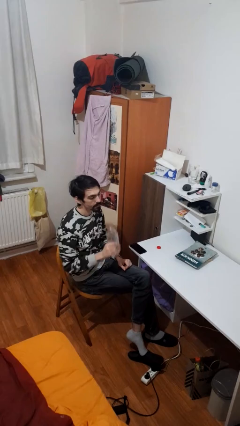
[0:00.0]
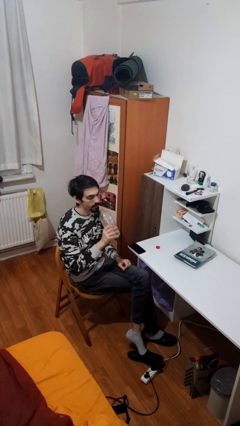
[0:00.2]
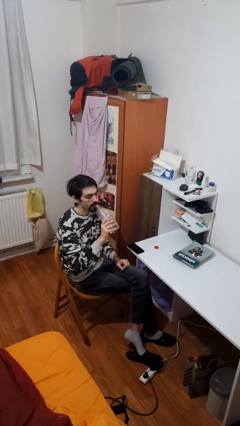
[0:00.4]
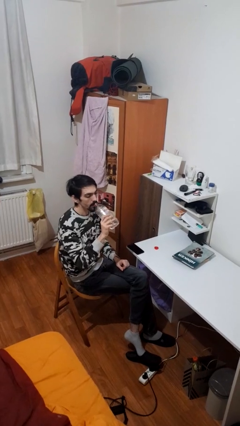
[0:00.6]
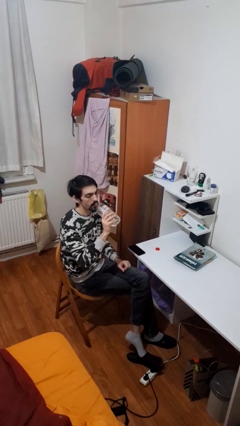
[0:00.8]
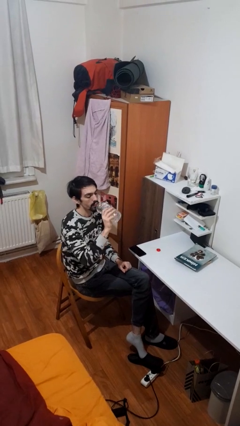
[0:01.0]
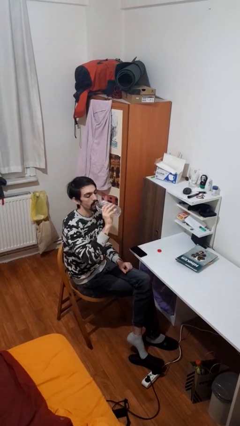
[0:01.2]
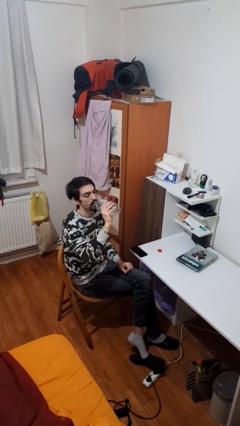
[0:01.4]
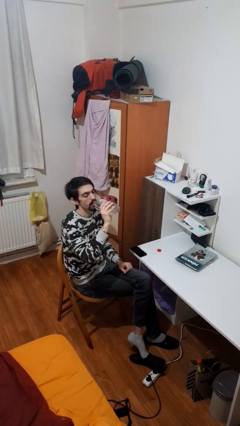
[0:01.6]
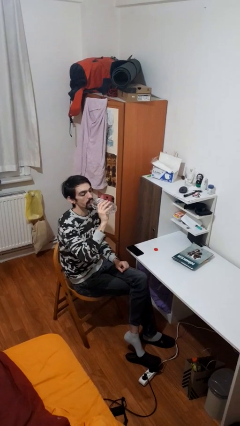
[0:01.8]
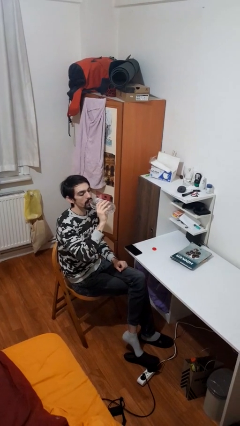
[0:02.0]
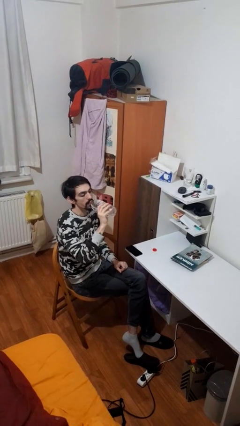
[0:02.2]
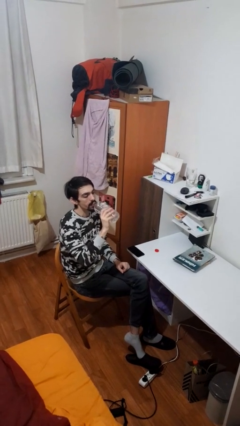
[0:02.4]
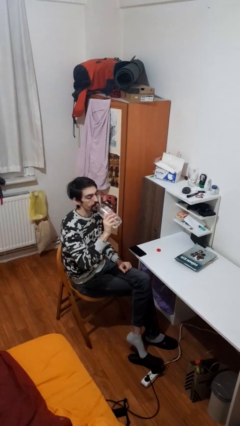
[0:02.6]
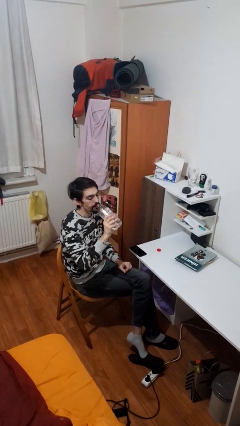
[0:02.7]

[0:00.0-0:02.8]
person drinks from bottle

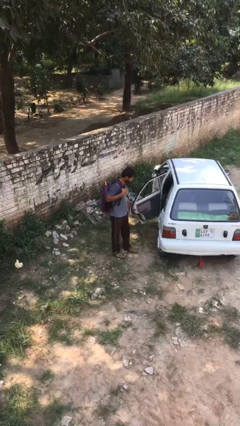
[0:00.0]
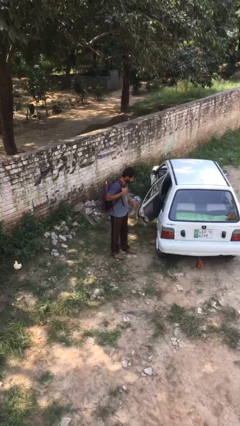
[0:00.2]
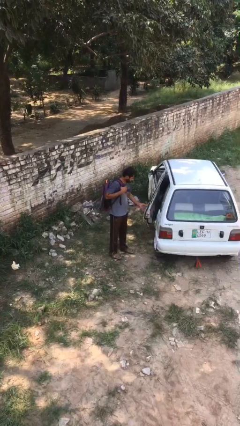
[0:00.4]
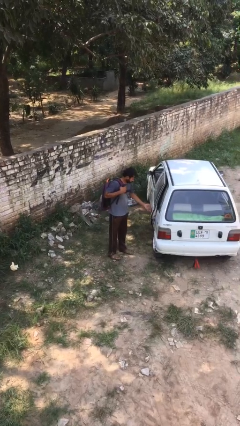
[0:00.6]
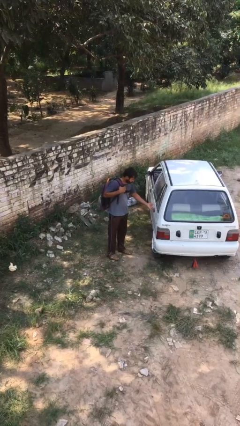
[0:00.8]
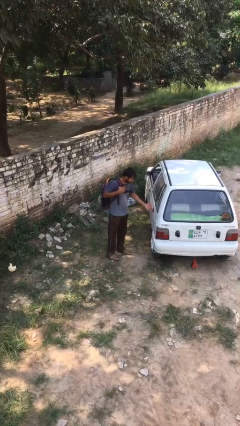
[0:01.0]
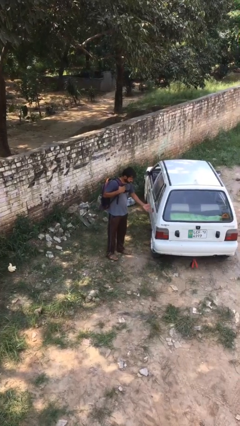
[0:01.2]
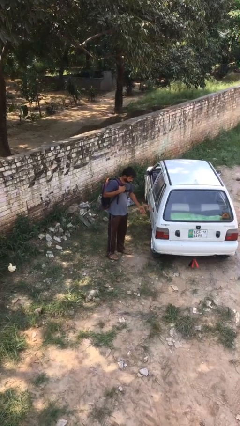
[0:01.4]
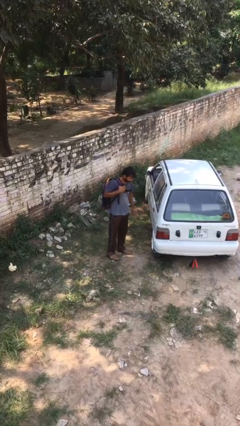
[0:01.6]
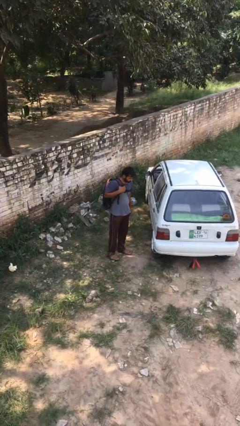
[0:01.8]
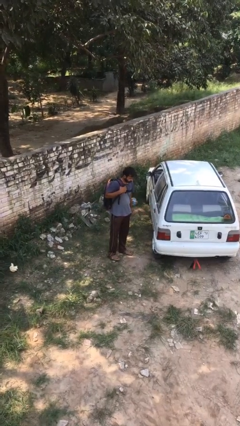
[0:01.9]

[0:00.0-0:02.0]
person closes car door

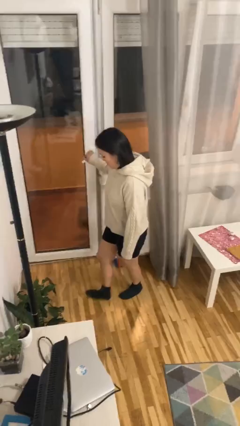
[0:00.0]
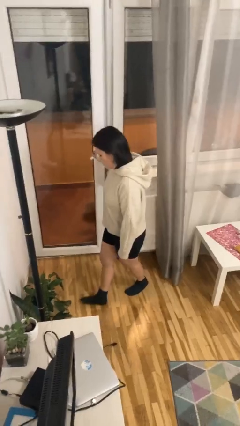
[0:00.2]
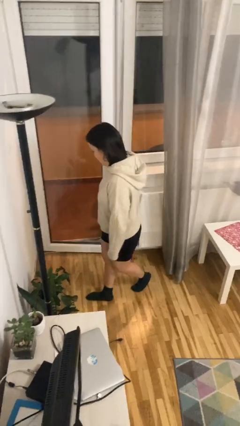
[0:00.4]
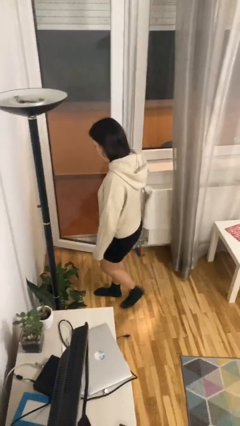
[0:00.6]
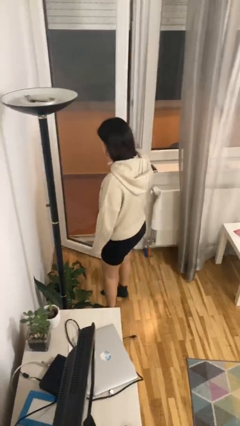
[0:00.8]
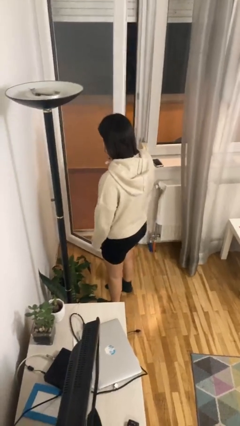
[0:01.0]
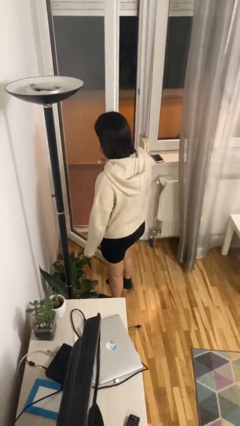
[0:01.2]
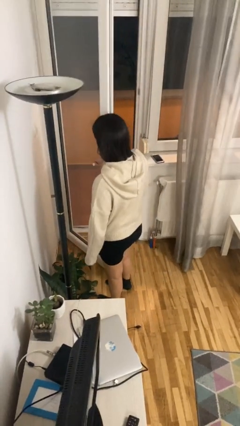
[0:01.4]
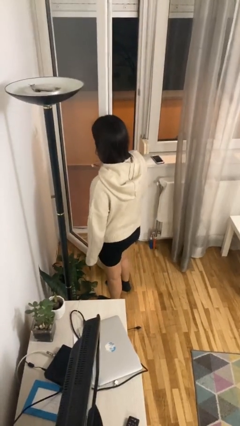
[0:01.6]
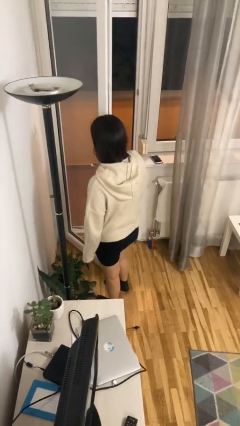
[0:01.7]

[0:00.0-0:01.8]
person opens facility door

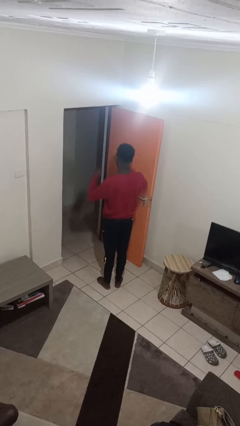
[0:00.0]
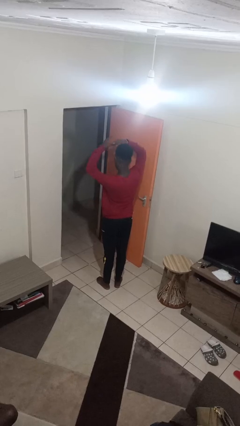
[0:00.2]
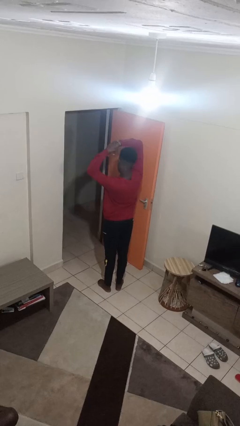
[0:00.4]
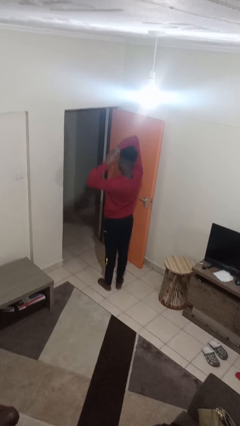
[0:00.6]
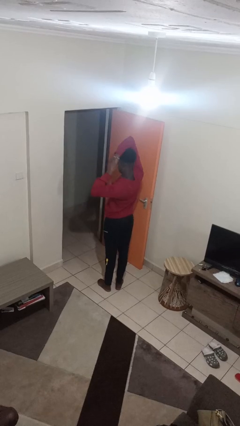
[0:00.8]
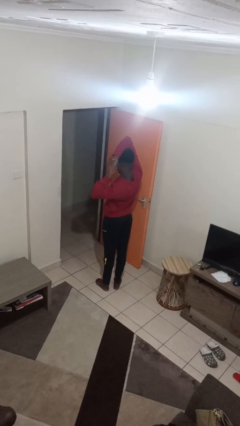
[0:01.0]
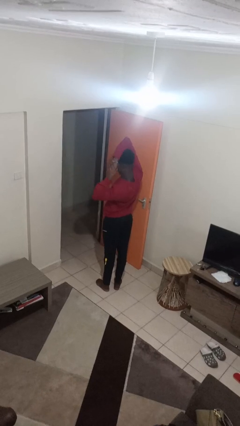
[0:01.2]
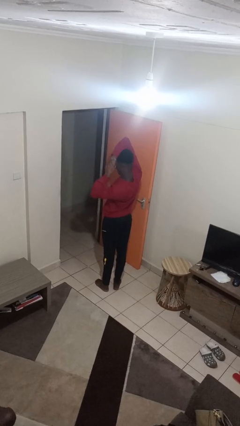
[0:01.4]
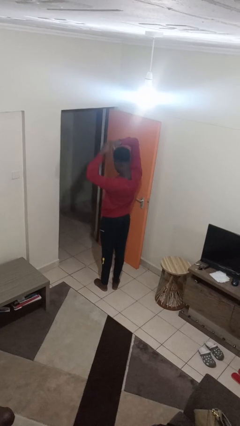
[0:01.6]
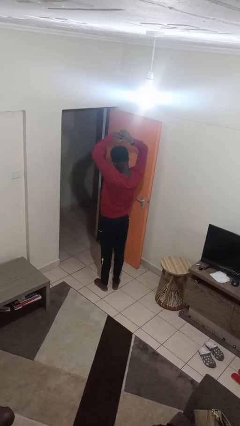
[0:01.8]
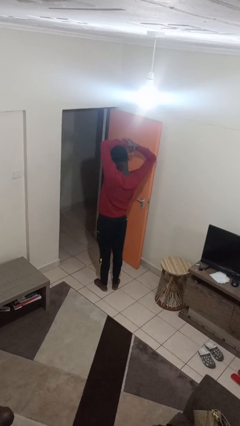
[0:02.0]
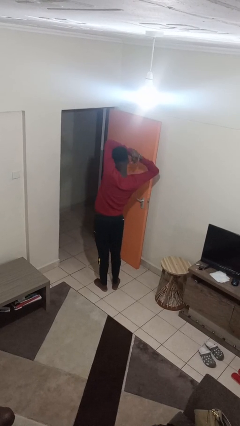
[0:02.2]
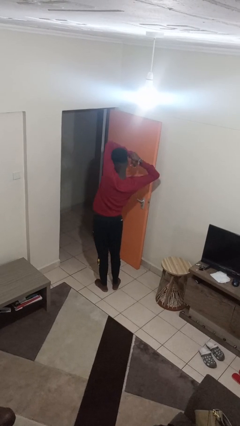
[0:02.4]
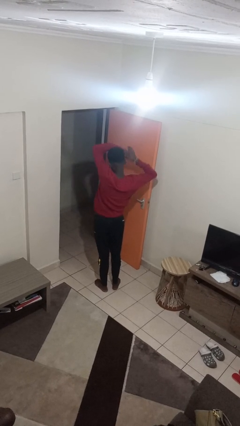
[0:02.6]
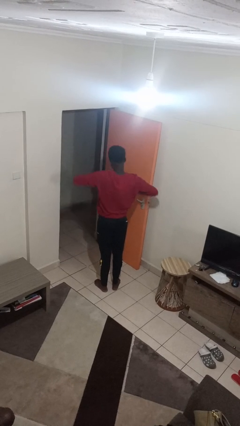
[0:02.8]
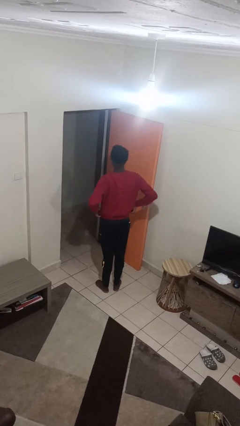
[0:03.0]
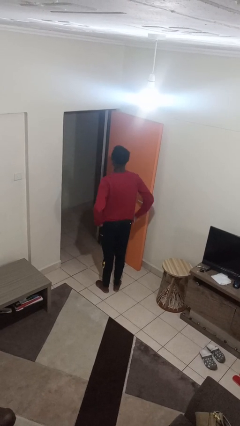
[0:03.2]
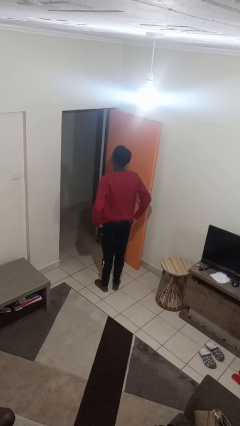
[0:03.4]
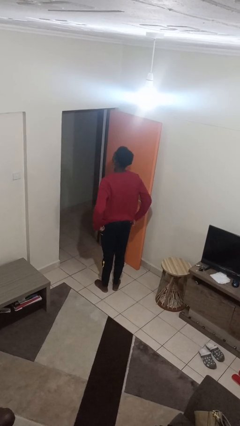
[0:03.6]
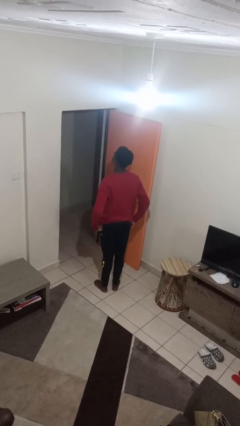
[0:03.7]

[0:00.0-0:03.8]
person stretches arms over head

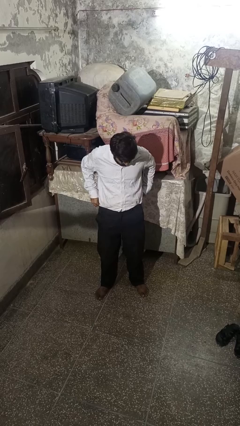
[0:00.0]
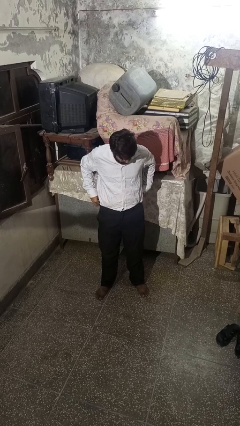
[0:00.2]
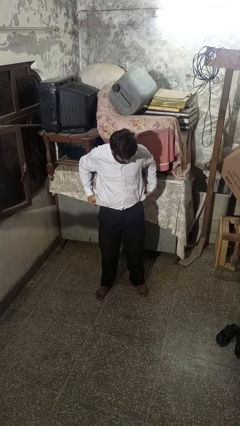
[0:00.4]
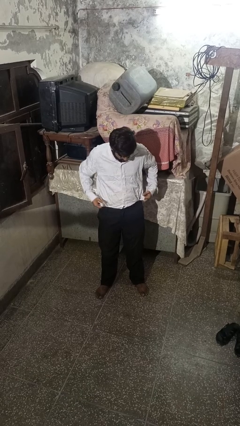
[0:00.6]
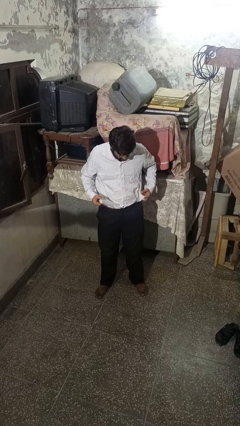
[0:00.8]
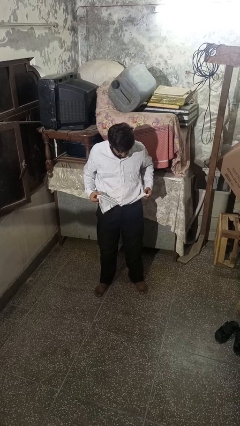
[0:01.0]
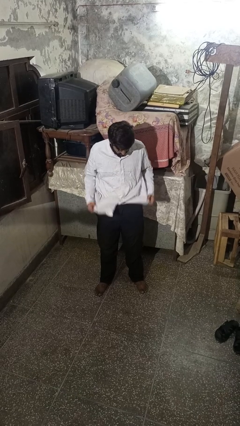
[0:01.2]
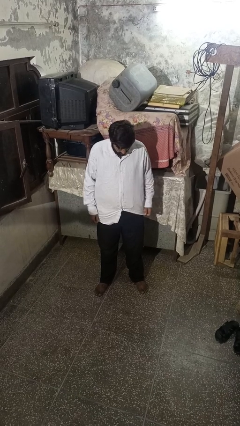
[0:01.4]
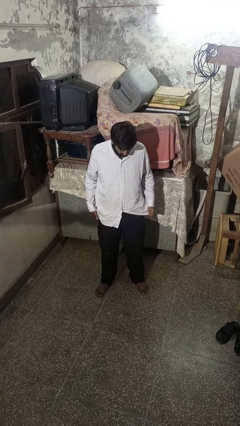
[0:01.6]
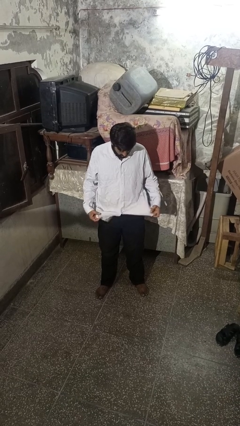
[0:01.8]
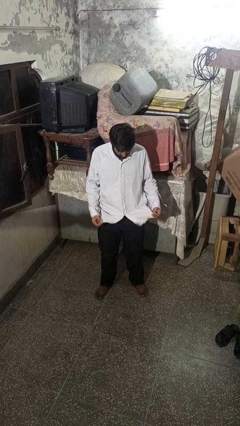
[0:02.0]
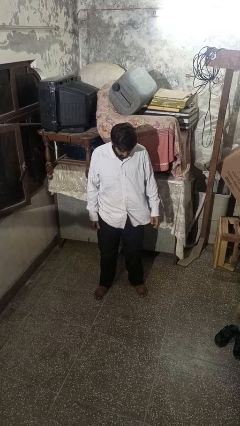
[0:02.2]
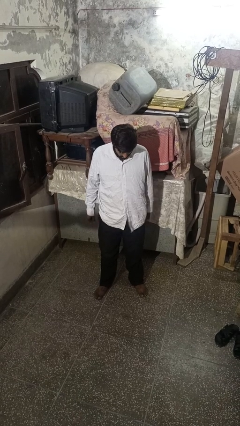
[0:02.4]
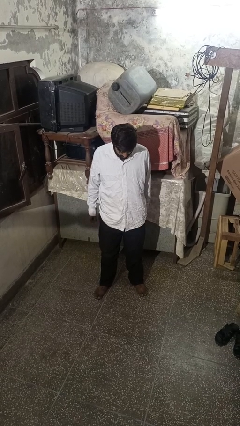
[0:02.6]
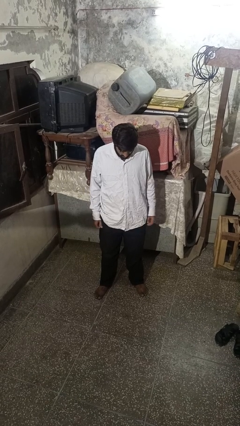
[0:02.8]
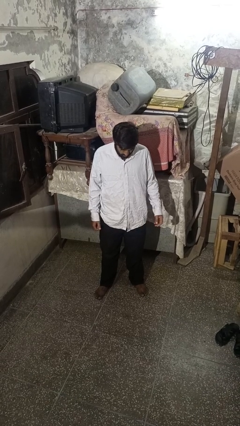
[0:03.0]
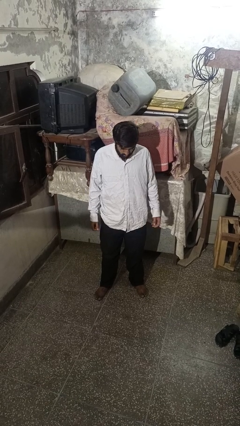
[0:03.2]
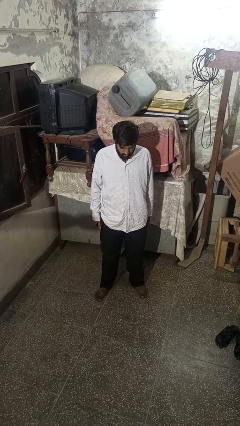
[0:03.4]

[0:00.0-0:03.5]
person untucks shirt

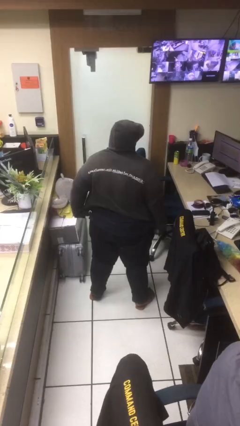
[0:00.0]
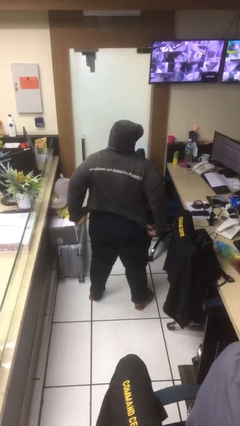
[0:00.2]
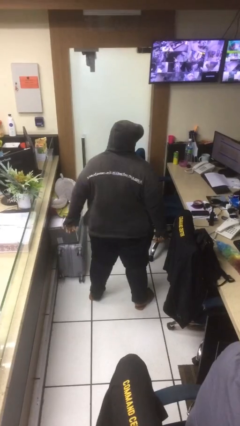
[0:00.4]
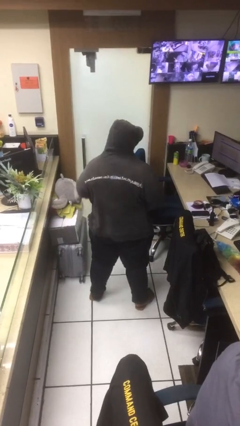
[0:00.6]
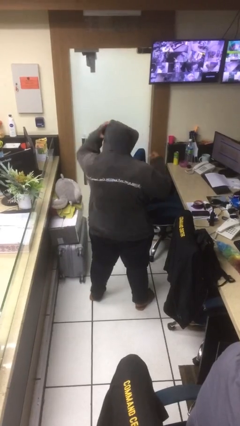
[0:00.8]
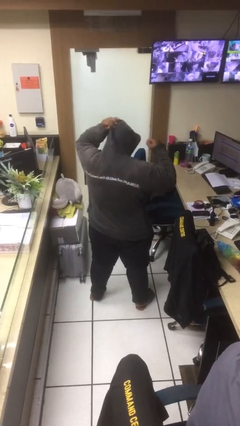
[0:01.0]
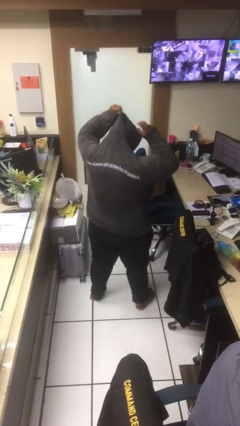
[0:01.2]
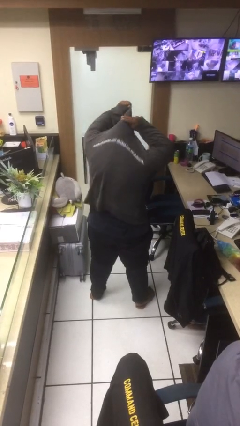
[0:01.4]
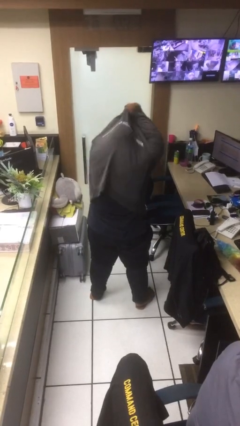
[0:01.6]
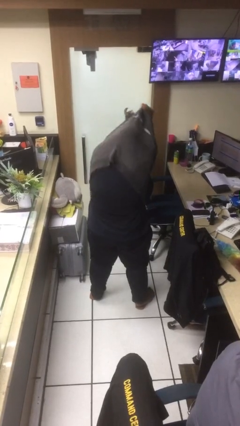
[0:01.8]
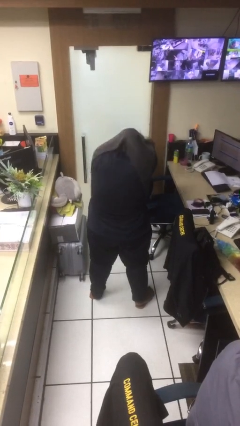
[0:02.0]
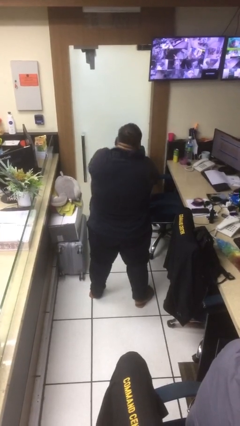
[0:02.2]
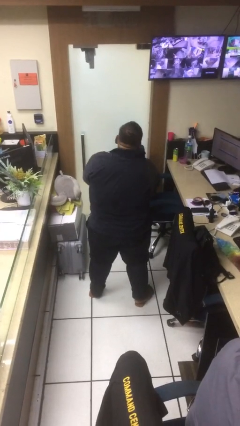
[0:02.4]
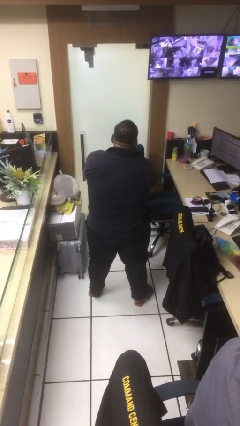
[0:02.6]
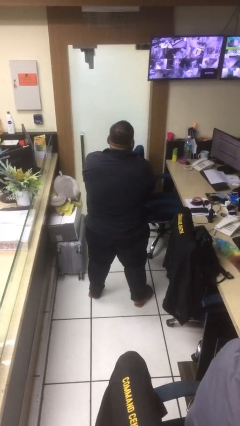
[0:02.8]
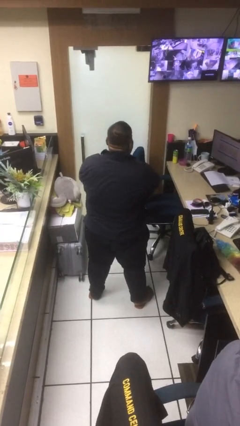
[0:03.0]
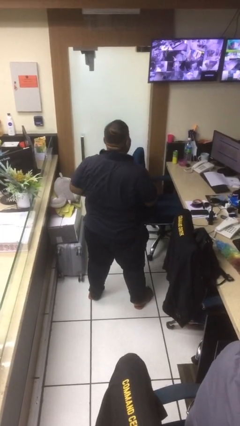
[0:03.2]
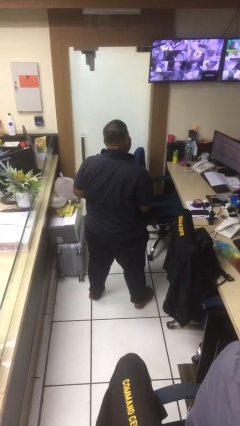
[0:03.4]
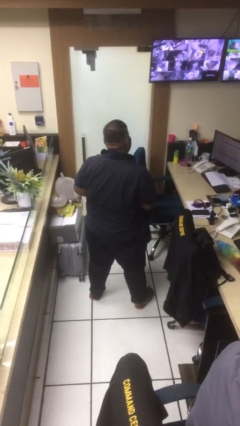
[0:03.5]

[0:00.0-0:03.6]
person takes off hoodie
